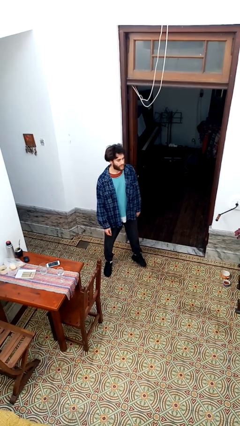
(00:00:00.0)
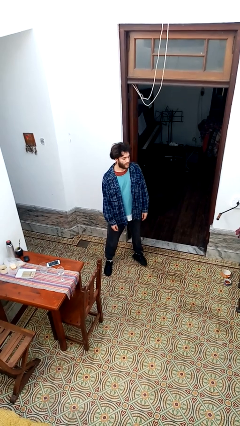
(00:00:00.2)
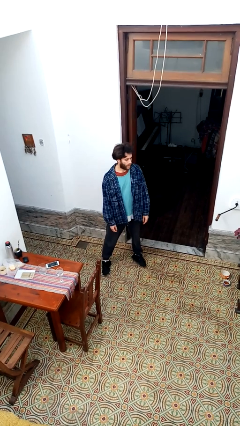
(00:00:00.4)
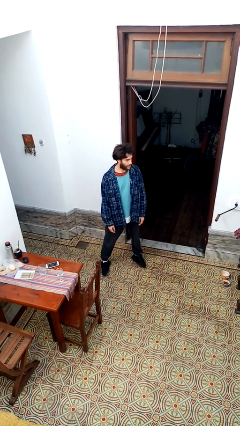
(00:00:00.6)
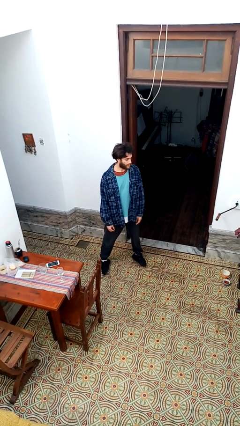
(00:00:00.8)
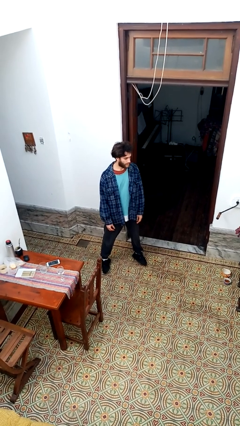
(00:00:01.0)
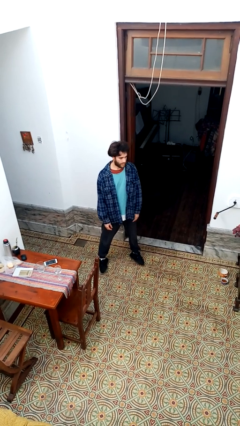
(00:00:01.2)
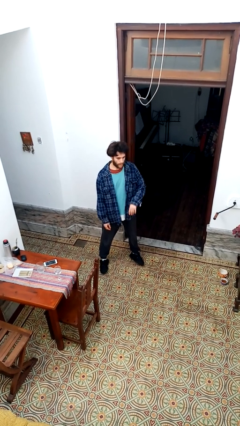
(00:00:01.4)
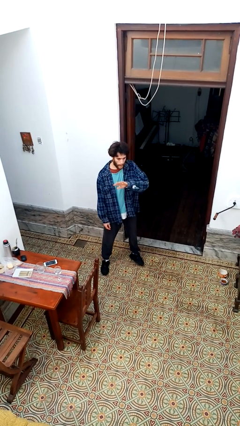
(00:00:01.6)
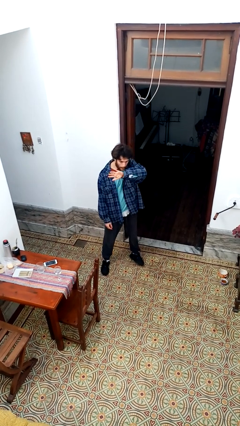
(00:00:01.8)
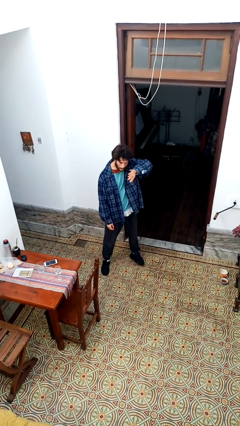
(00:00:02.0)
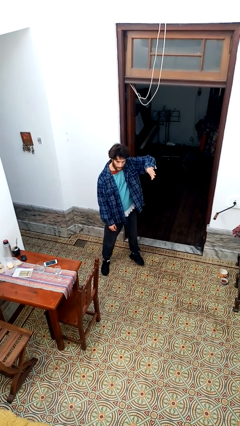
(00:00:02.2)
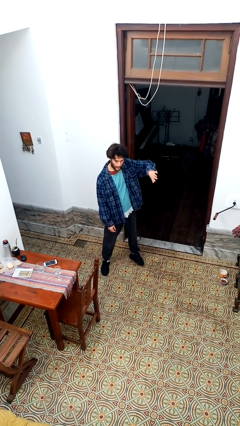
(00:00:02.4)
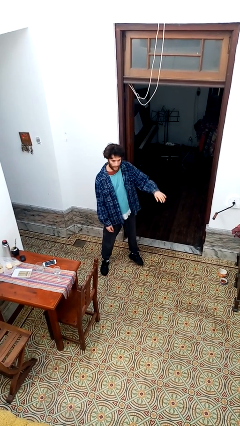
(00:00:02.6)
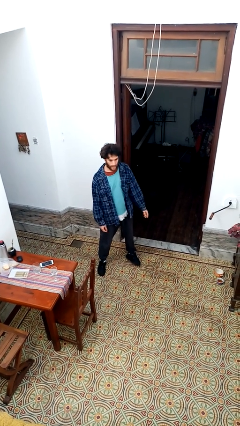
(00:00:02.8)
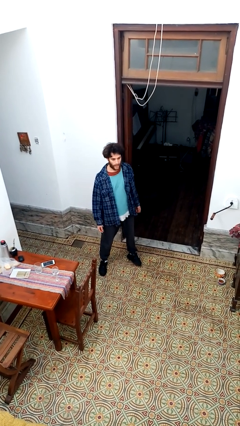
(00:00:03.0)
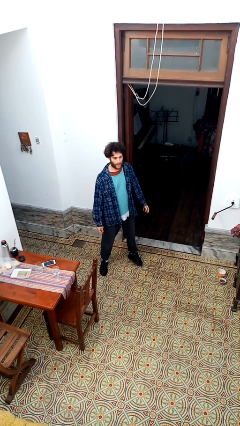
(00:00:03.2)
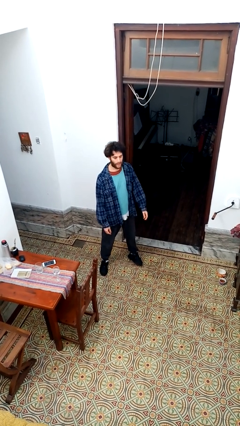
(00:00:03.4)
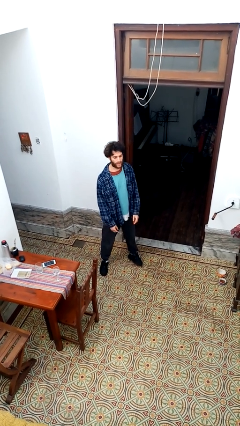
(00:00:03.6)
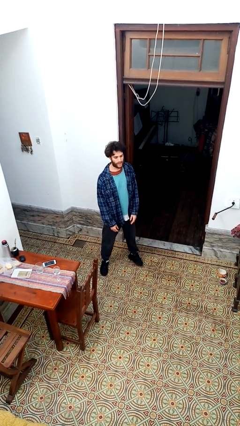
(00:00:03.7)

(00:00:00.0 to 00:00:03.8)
person gestures swipe left

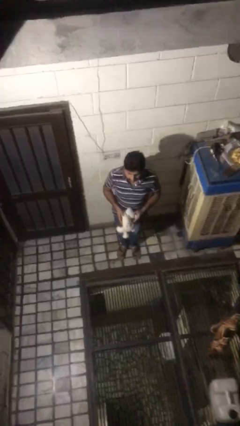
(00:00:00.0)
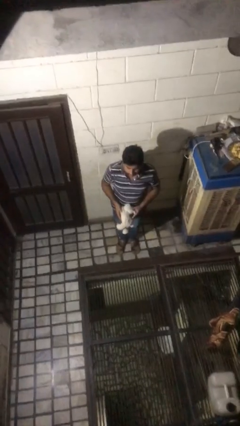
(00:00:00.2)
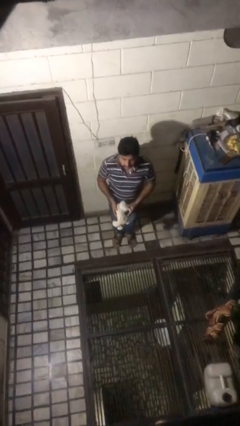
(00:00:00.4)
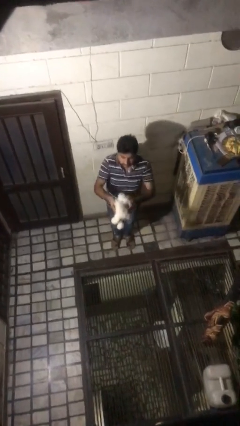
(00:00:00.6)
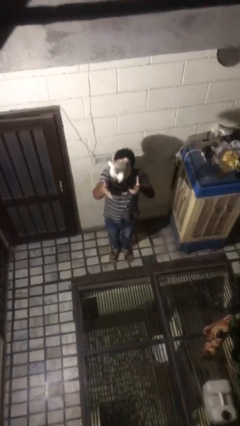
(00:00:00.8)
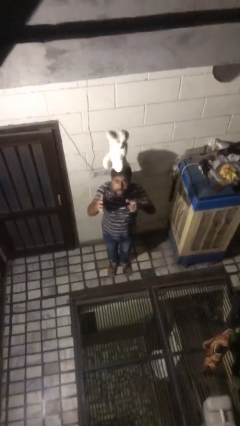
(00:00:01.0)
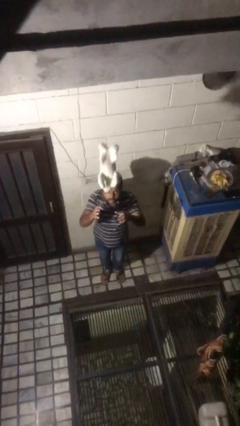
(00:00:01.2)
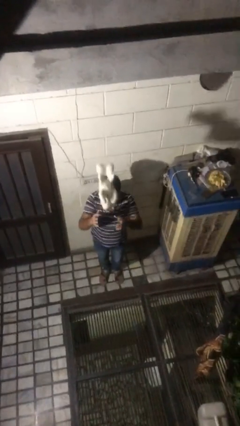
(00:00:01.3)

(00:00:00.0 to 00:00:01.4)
person drops object

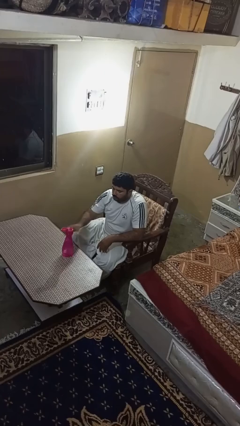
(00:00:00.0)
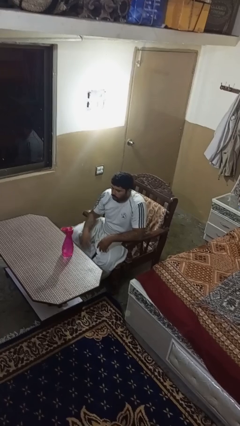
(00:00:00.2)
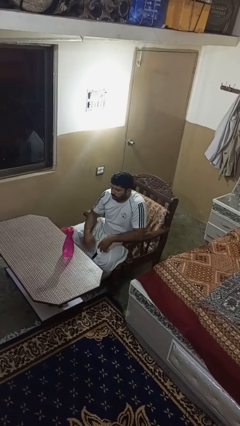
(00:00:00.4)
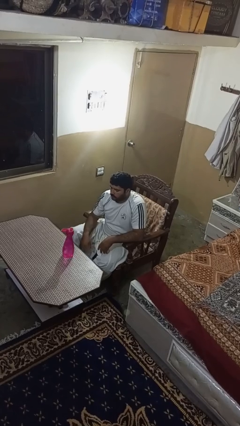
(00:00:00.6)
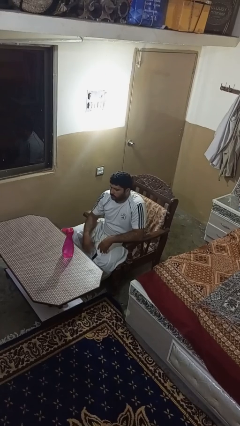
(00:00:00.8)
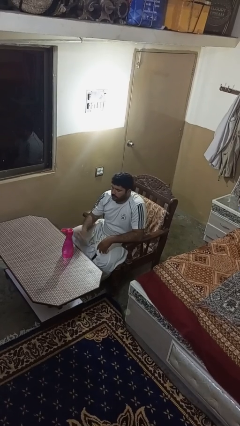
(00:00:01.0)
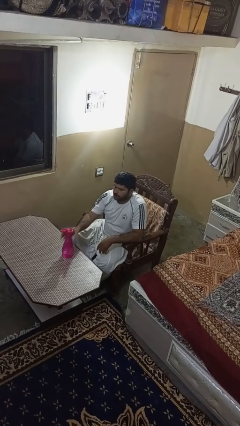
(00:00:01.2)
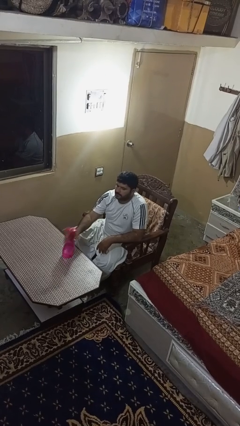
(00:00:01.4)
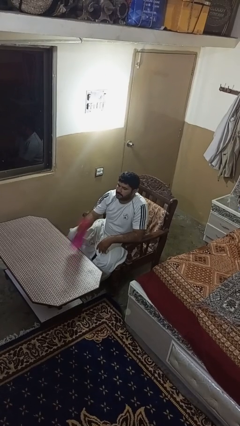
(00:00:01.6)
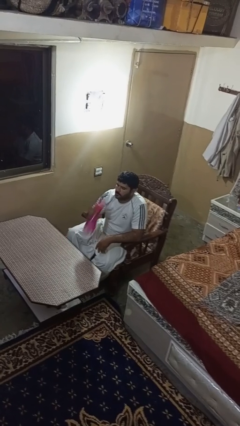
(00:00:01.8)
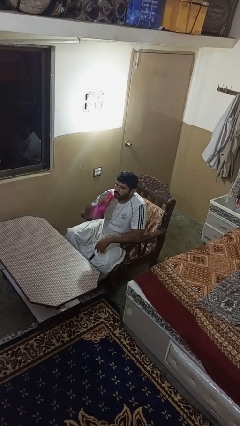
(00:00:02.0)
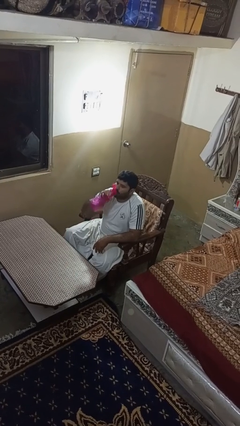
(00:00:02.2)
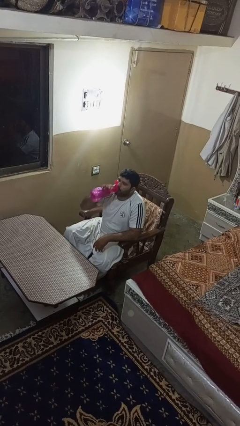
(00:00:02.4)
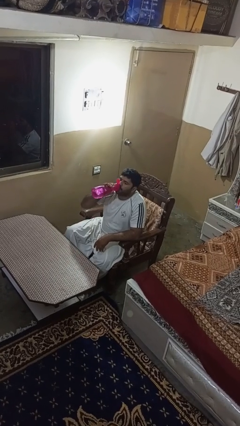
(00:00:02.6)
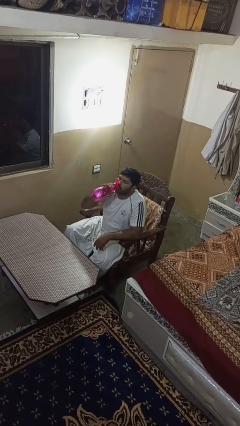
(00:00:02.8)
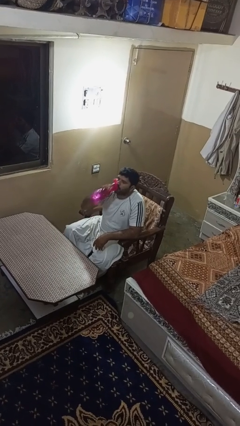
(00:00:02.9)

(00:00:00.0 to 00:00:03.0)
person drinks from bottle

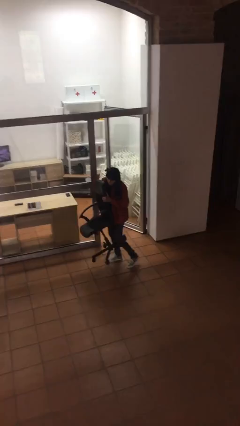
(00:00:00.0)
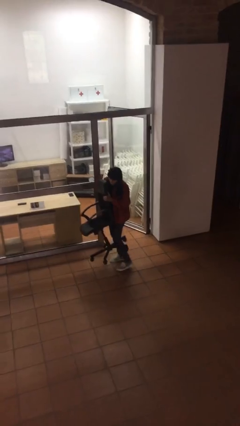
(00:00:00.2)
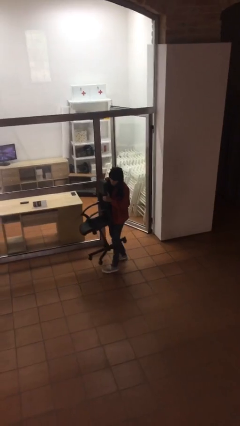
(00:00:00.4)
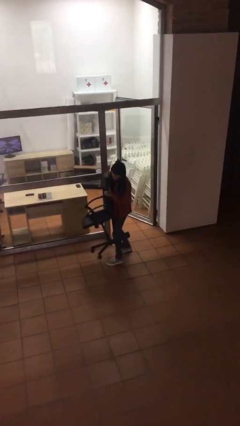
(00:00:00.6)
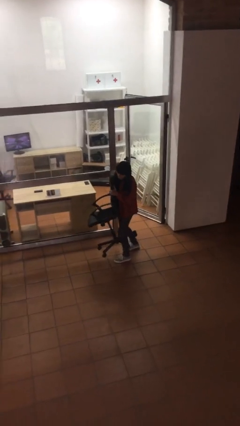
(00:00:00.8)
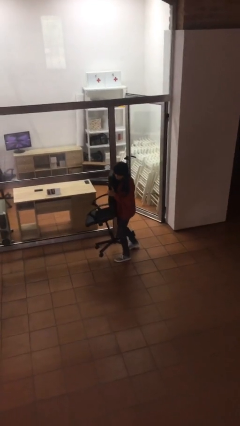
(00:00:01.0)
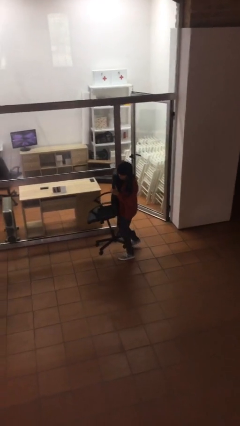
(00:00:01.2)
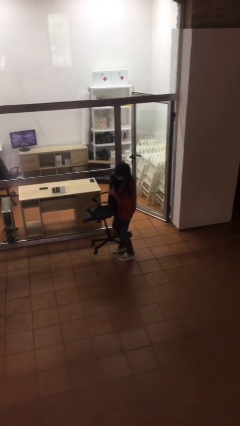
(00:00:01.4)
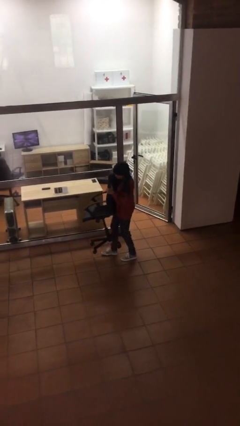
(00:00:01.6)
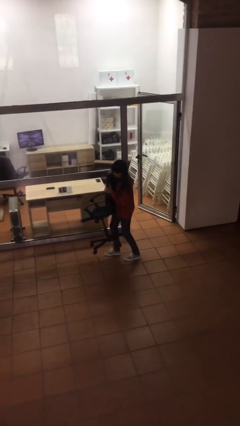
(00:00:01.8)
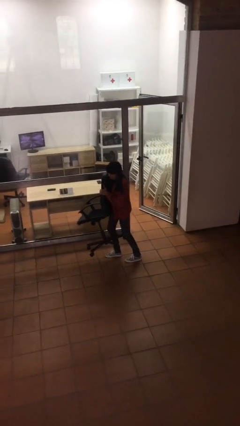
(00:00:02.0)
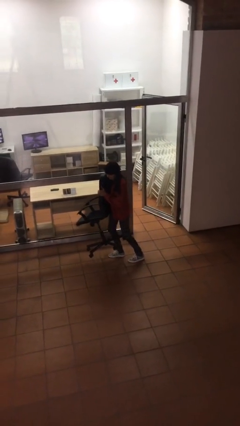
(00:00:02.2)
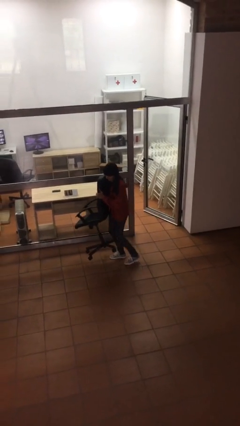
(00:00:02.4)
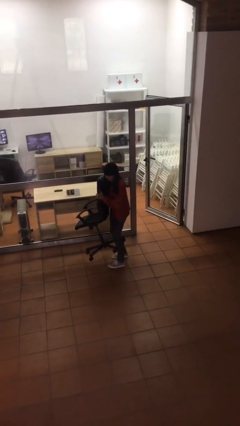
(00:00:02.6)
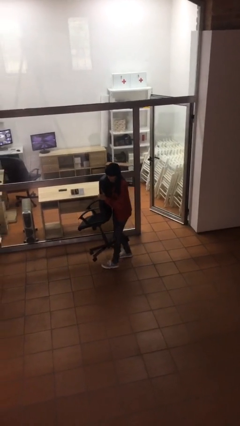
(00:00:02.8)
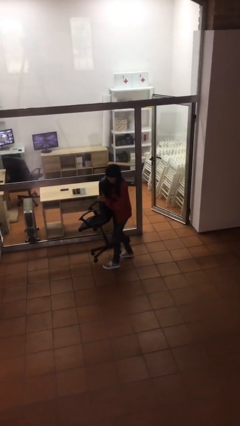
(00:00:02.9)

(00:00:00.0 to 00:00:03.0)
person carries heavy object

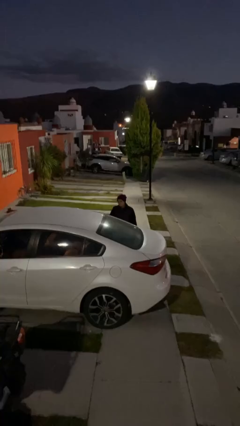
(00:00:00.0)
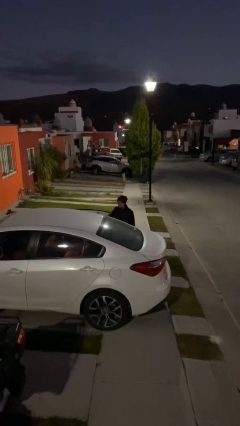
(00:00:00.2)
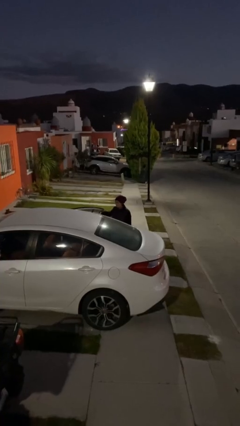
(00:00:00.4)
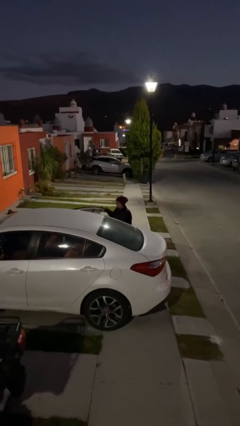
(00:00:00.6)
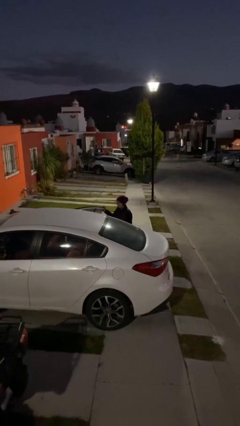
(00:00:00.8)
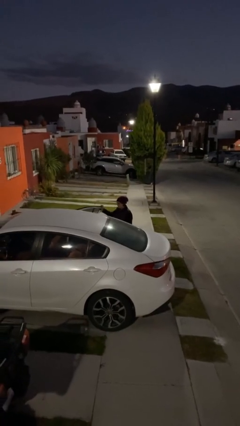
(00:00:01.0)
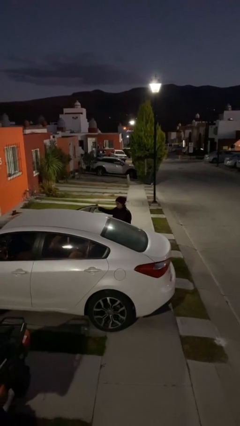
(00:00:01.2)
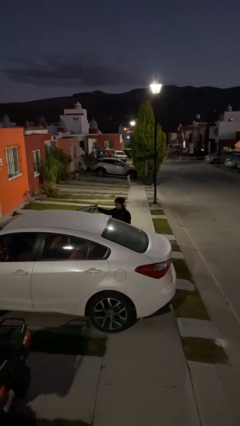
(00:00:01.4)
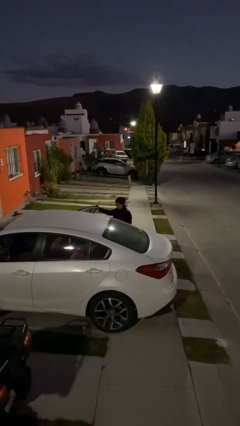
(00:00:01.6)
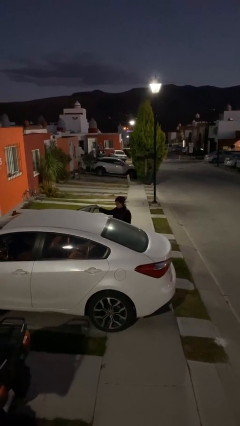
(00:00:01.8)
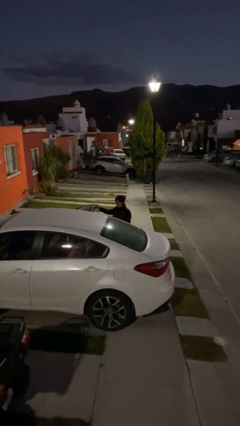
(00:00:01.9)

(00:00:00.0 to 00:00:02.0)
person opens car door

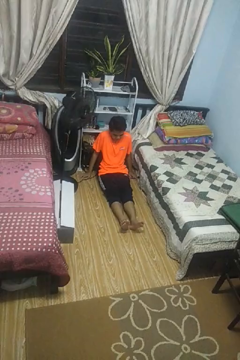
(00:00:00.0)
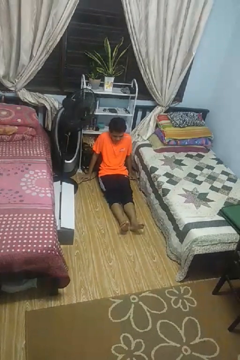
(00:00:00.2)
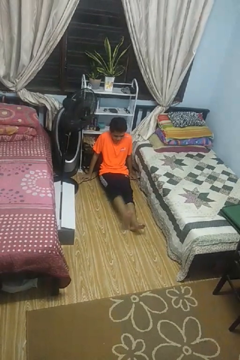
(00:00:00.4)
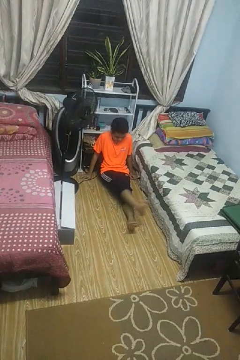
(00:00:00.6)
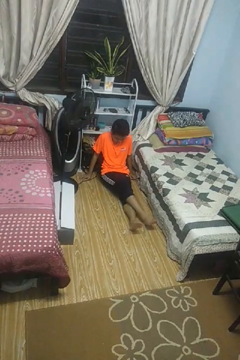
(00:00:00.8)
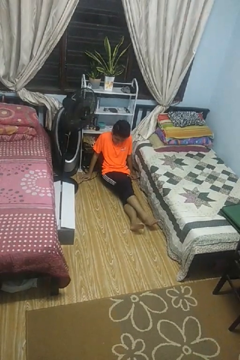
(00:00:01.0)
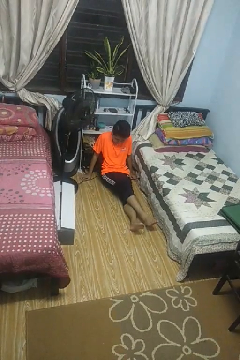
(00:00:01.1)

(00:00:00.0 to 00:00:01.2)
person crosses legs

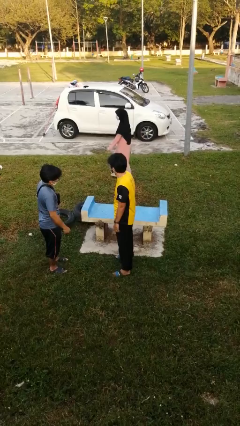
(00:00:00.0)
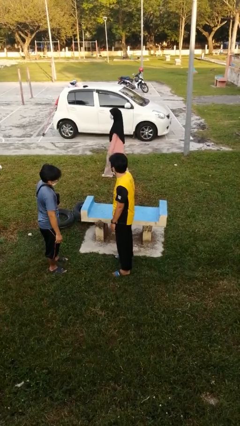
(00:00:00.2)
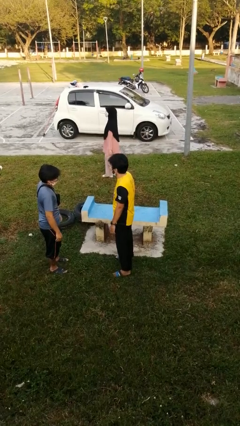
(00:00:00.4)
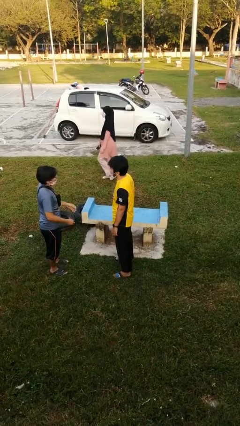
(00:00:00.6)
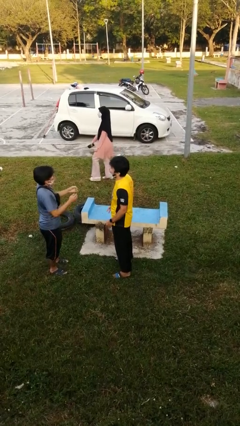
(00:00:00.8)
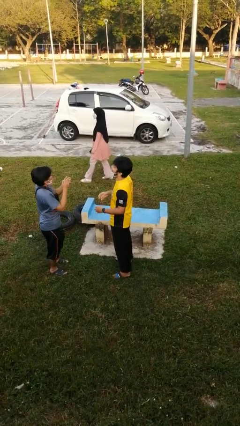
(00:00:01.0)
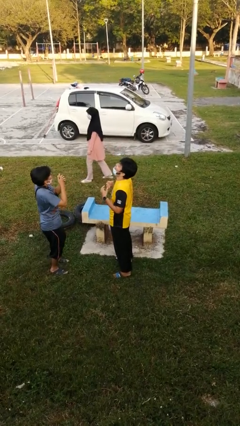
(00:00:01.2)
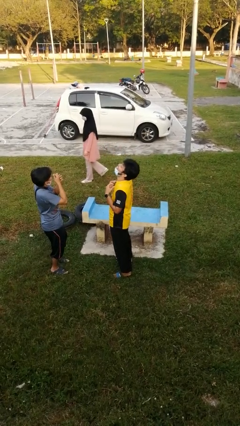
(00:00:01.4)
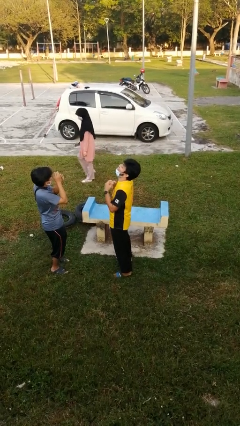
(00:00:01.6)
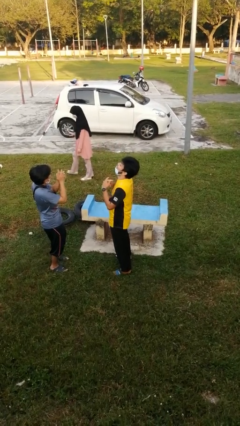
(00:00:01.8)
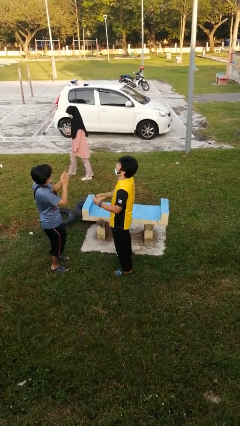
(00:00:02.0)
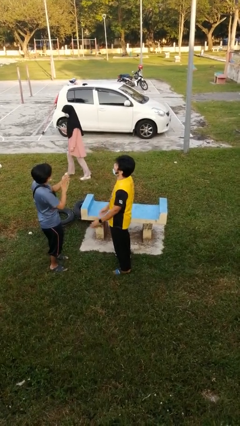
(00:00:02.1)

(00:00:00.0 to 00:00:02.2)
person laughs with person

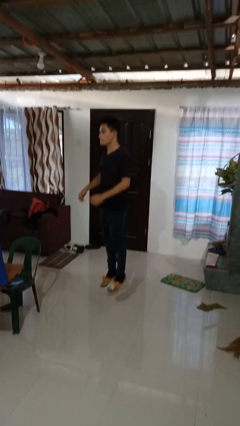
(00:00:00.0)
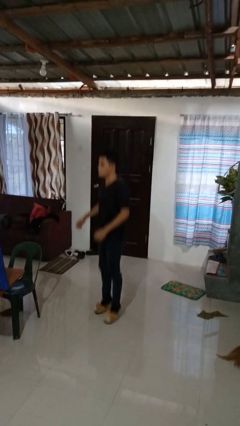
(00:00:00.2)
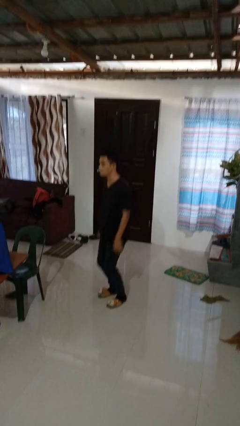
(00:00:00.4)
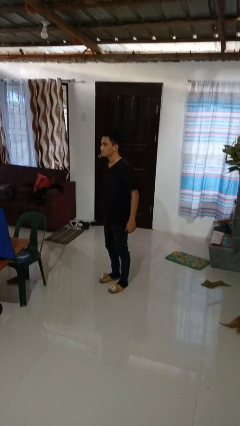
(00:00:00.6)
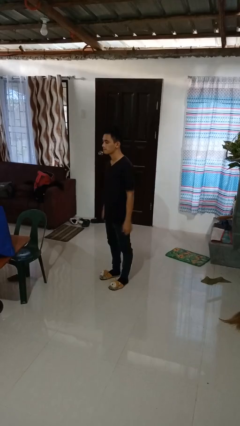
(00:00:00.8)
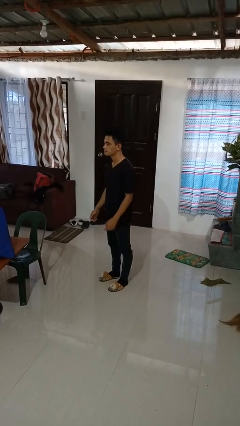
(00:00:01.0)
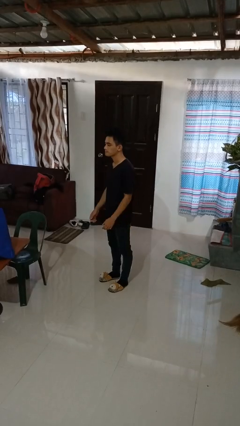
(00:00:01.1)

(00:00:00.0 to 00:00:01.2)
person jumps
